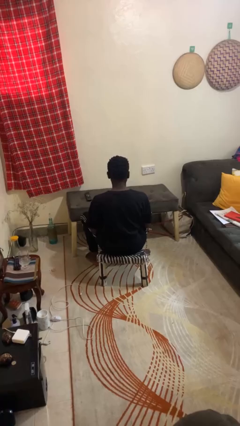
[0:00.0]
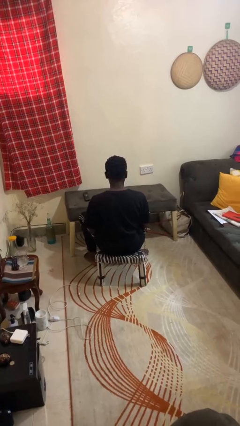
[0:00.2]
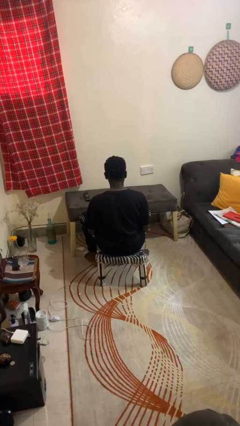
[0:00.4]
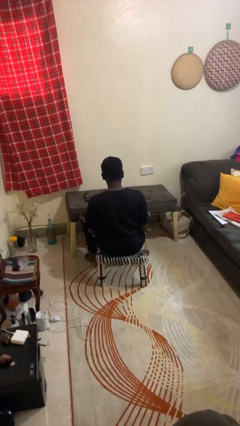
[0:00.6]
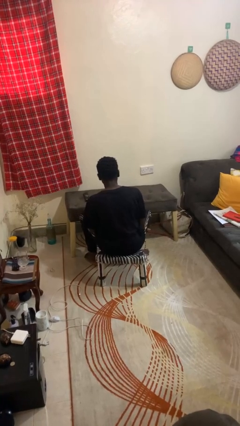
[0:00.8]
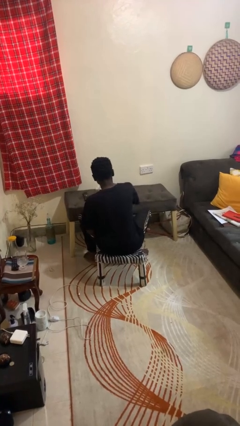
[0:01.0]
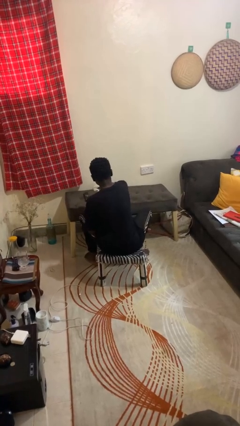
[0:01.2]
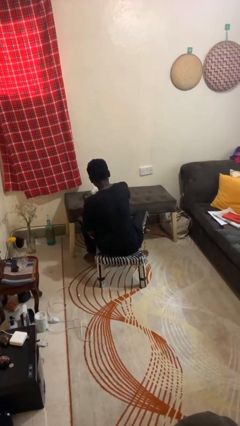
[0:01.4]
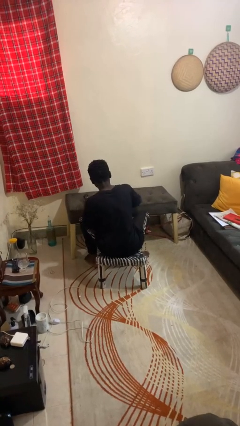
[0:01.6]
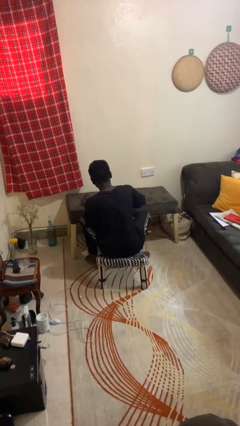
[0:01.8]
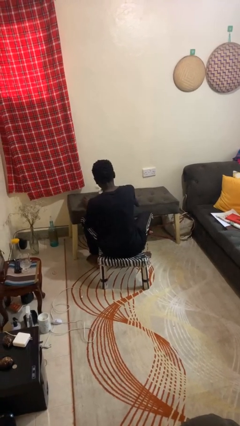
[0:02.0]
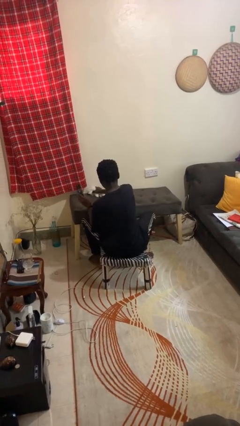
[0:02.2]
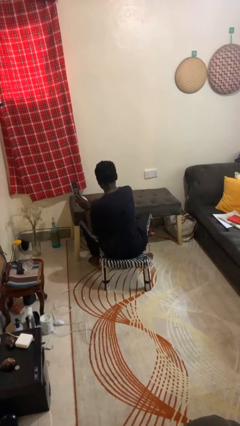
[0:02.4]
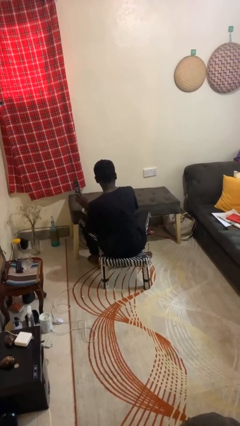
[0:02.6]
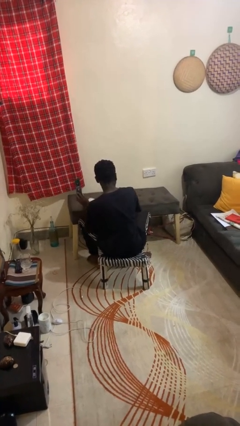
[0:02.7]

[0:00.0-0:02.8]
person cleans table with rag

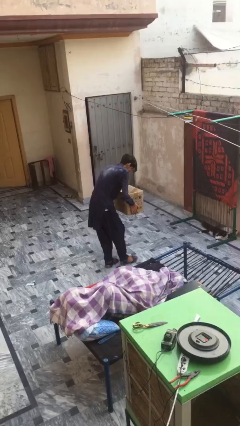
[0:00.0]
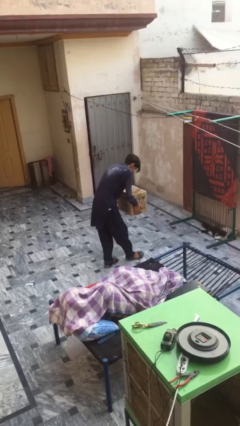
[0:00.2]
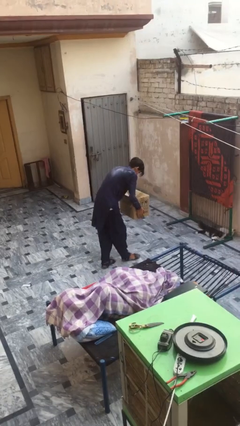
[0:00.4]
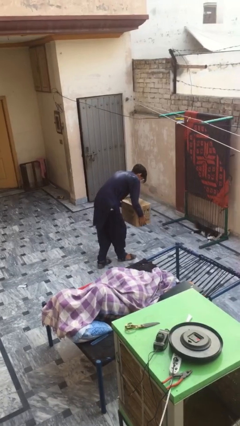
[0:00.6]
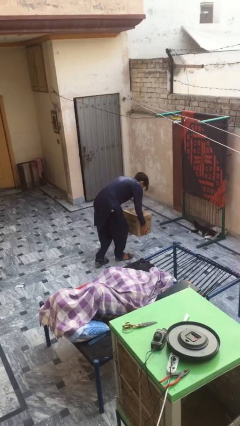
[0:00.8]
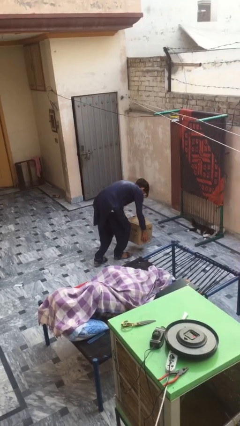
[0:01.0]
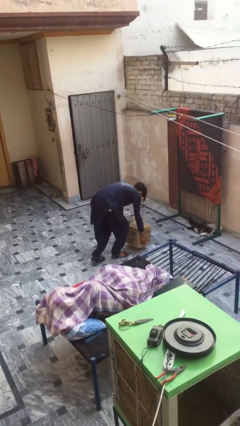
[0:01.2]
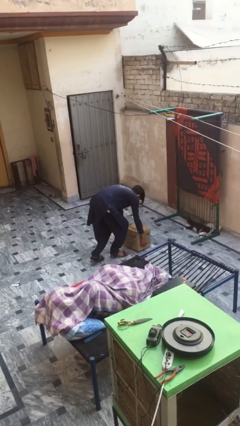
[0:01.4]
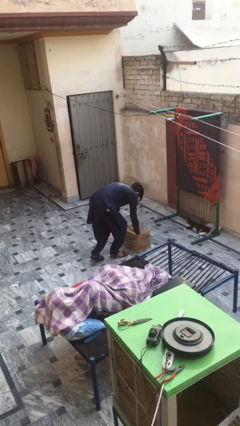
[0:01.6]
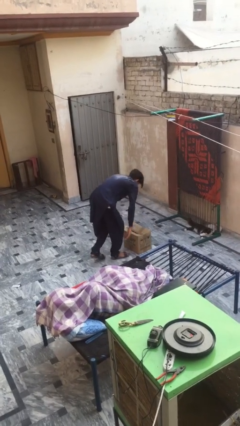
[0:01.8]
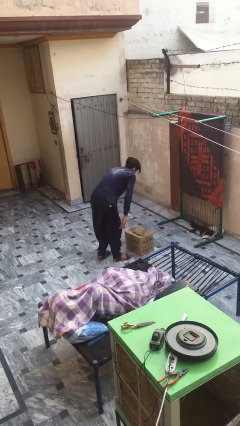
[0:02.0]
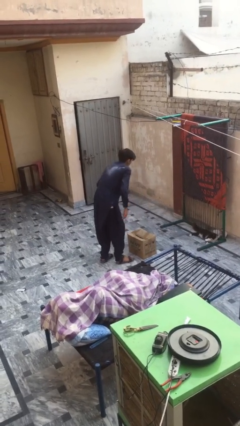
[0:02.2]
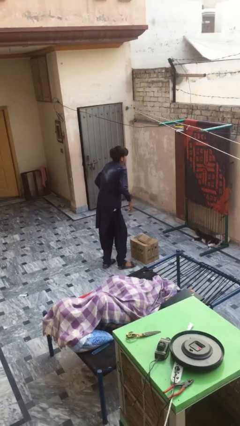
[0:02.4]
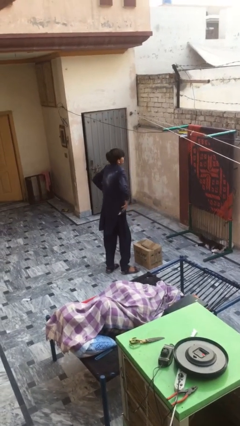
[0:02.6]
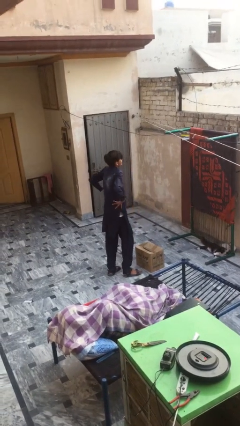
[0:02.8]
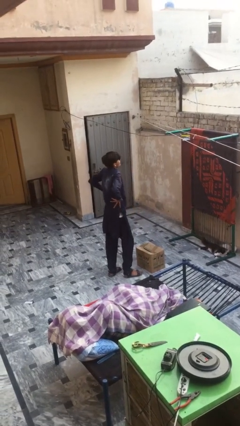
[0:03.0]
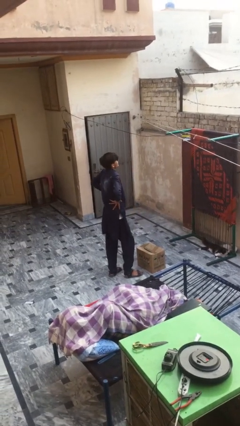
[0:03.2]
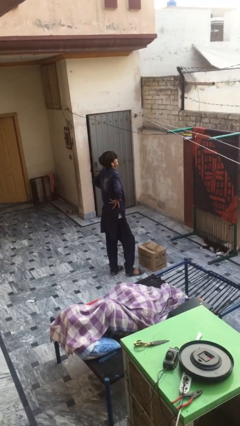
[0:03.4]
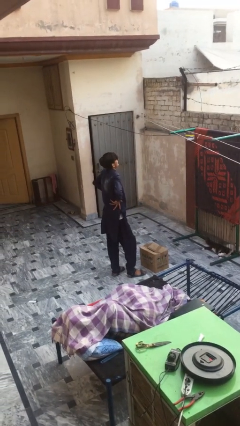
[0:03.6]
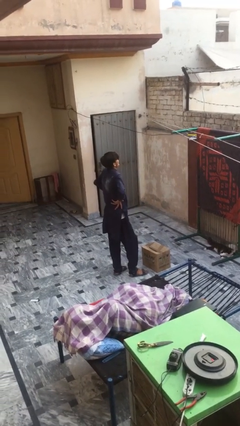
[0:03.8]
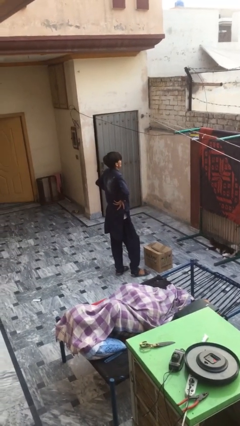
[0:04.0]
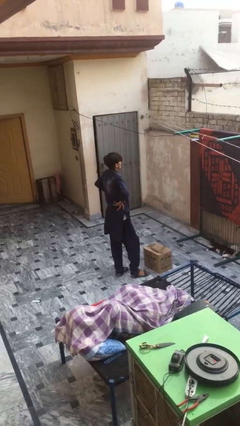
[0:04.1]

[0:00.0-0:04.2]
person puts down object on floor

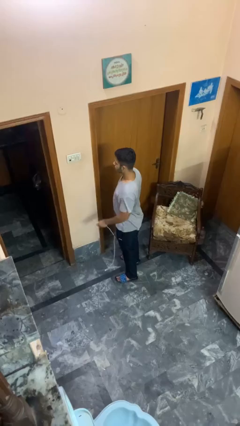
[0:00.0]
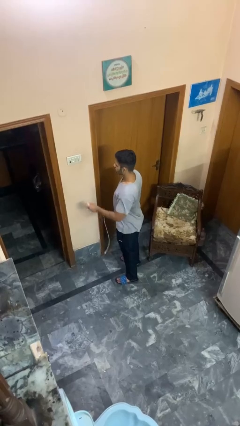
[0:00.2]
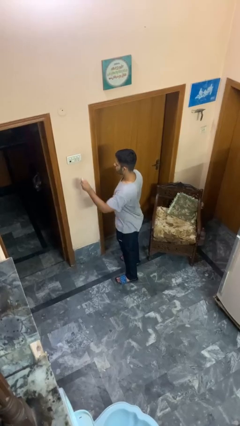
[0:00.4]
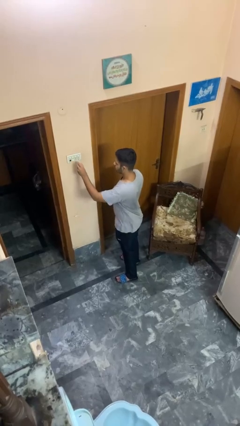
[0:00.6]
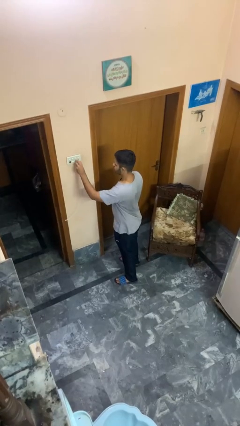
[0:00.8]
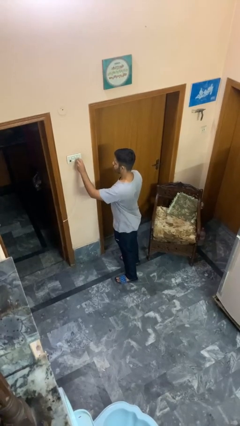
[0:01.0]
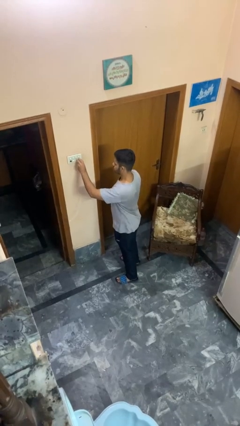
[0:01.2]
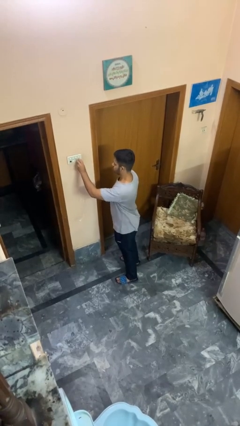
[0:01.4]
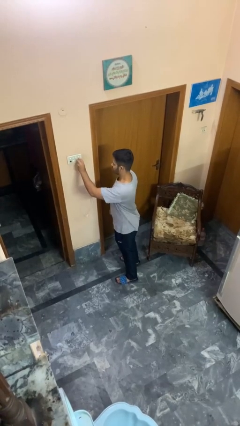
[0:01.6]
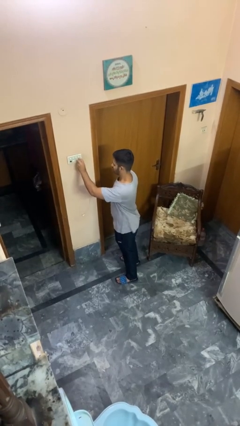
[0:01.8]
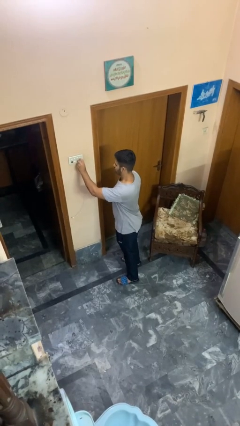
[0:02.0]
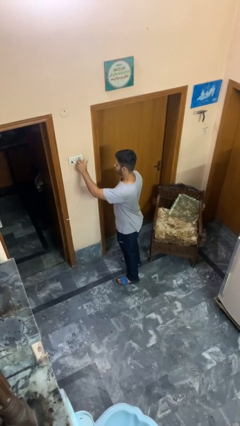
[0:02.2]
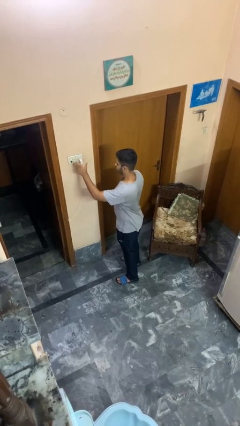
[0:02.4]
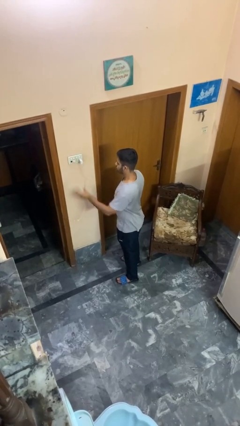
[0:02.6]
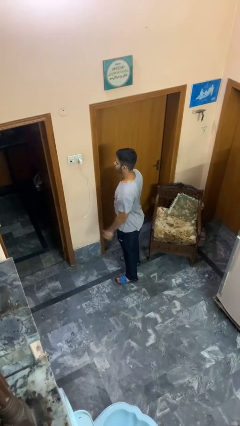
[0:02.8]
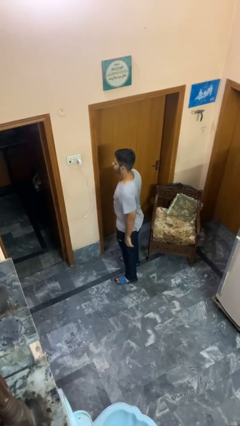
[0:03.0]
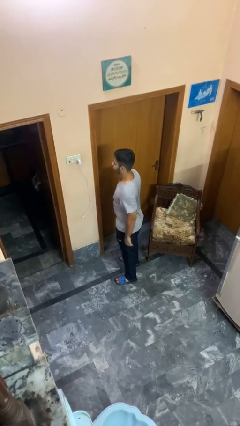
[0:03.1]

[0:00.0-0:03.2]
person plugs into electrical socket

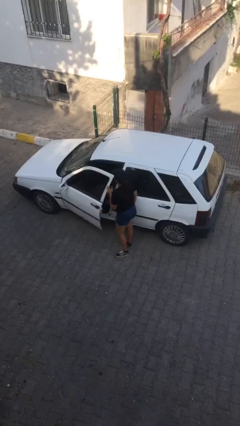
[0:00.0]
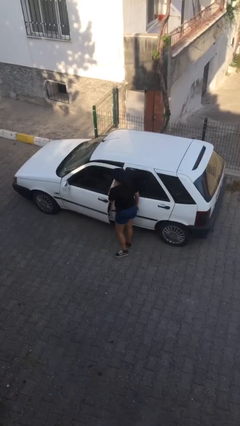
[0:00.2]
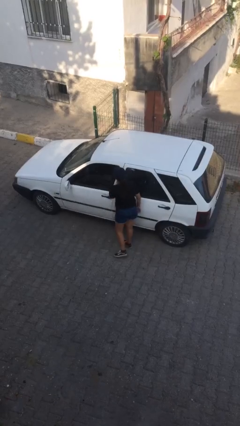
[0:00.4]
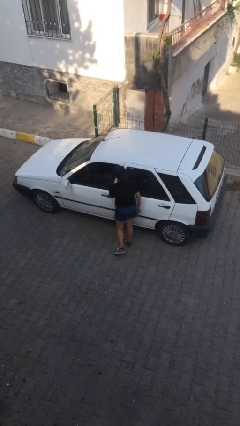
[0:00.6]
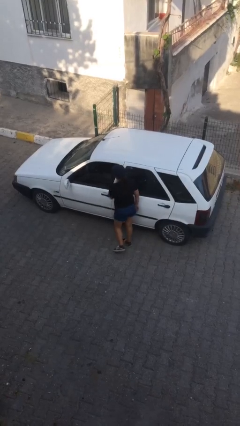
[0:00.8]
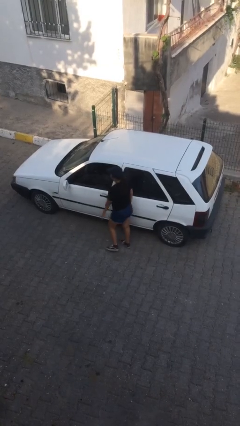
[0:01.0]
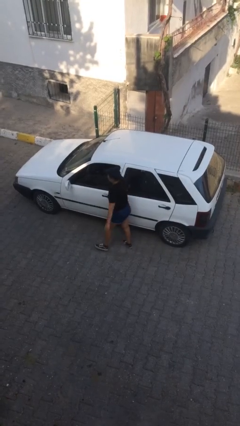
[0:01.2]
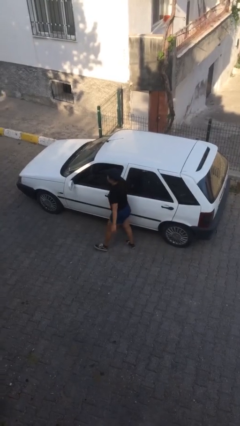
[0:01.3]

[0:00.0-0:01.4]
person closes car door

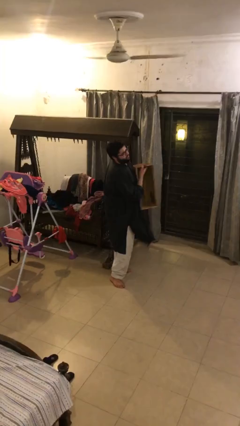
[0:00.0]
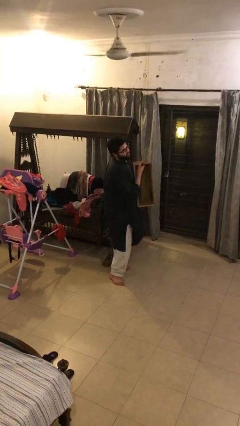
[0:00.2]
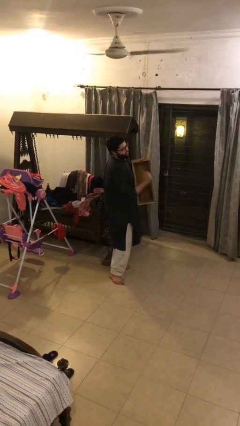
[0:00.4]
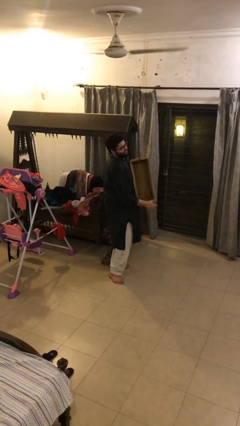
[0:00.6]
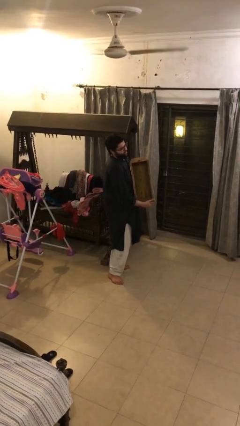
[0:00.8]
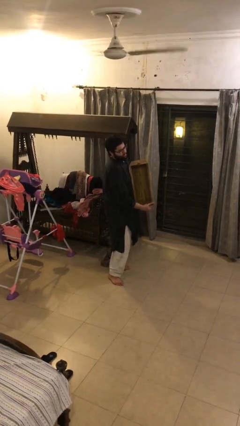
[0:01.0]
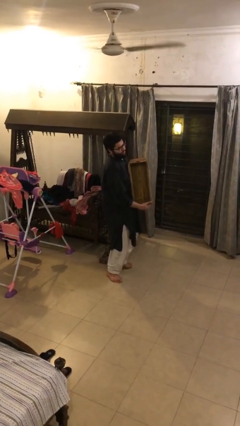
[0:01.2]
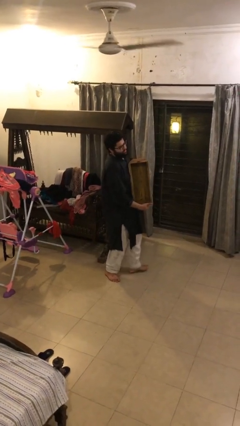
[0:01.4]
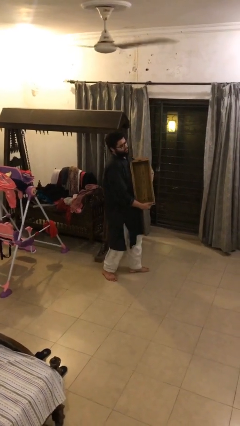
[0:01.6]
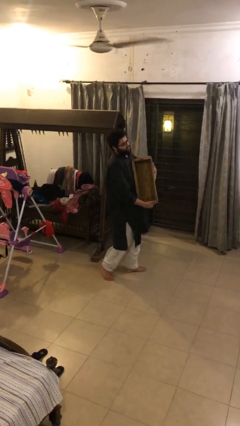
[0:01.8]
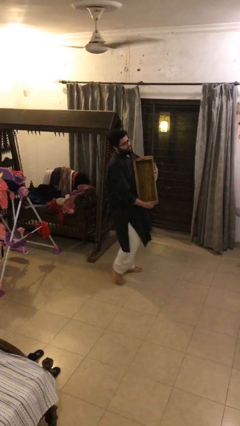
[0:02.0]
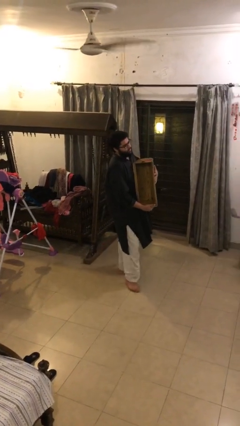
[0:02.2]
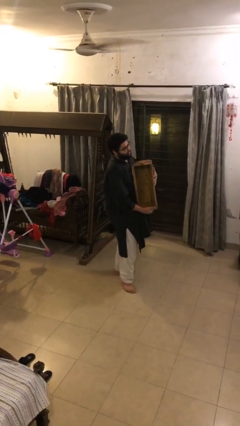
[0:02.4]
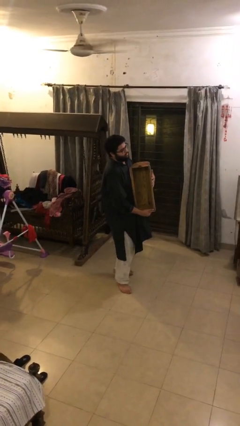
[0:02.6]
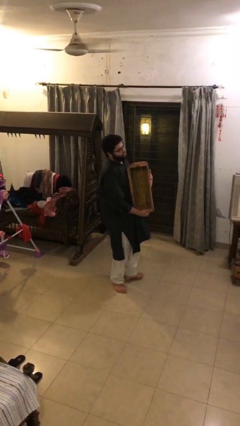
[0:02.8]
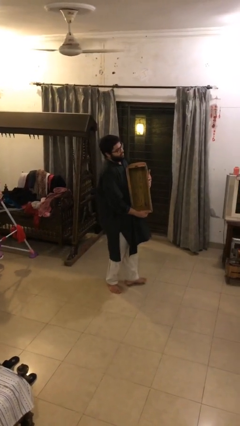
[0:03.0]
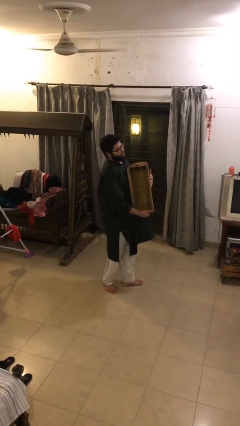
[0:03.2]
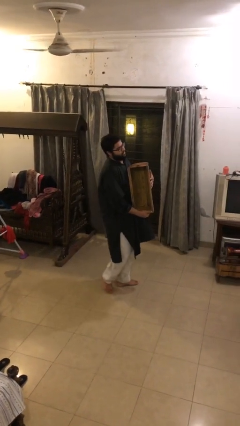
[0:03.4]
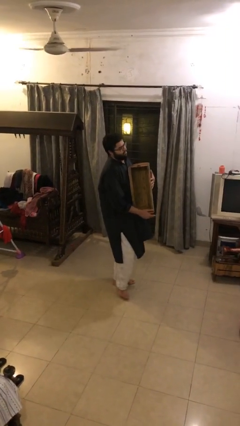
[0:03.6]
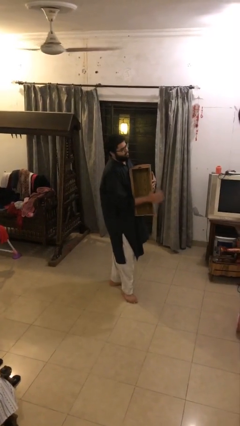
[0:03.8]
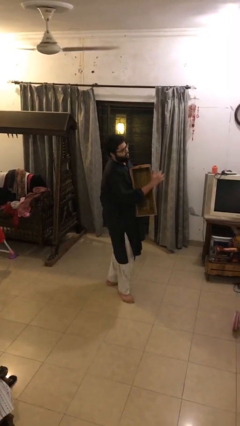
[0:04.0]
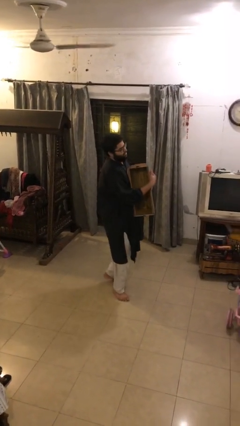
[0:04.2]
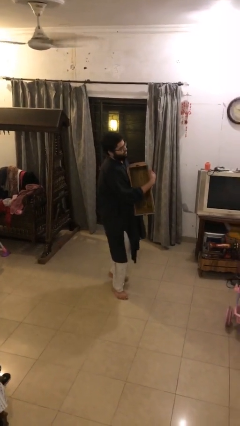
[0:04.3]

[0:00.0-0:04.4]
person carries heavy object

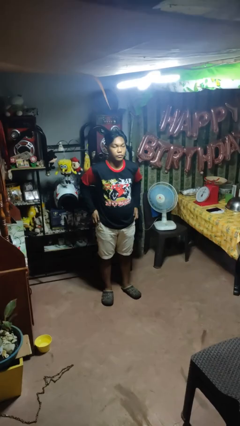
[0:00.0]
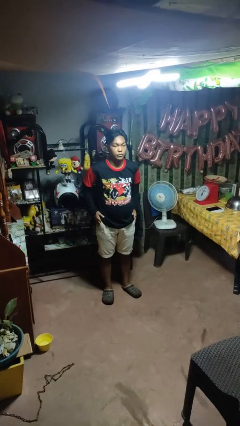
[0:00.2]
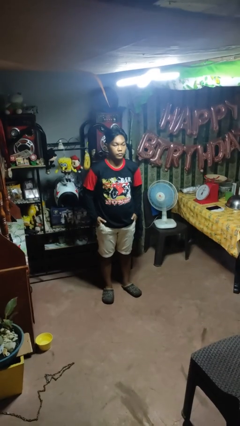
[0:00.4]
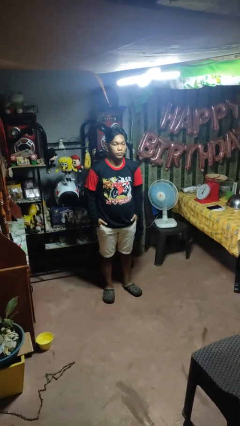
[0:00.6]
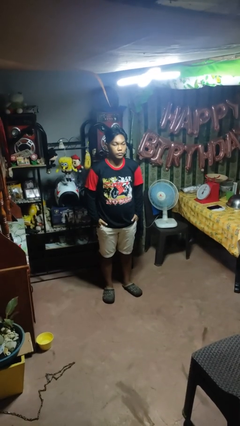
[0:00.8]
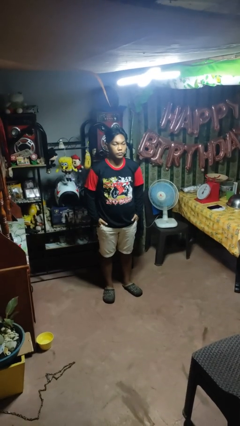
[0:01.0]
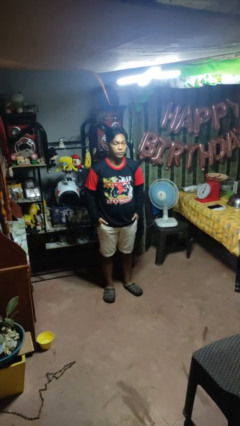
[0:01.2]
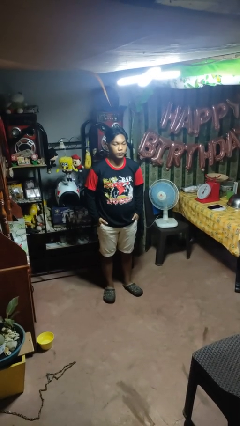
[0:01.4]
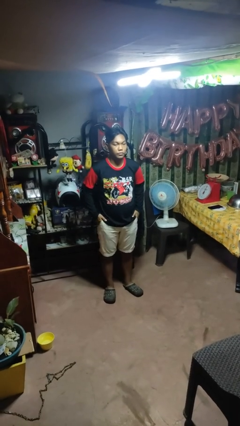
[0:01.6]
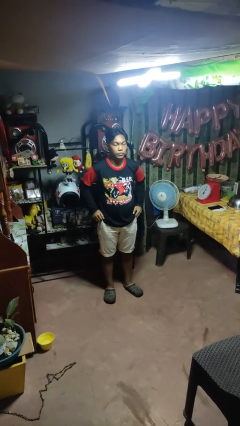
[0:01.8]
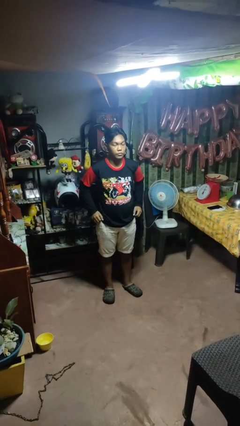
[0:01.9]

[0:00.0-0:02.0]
person puts hands in back pockets
